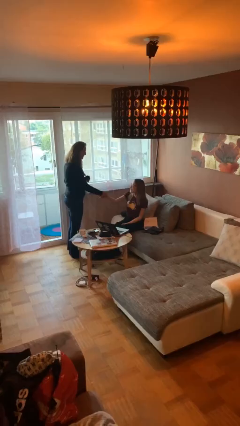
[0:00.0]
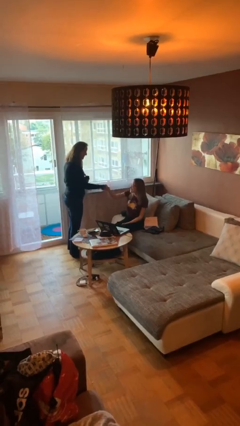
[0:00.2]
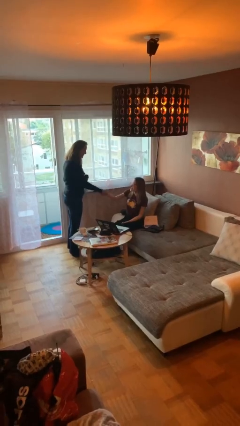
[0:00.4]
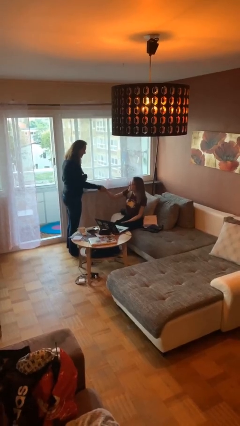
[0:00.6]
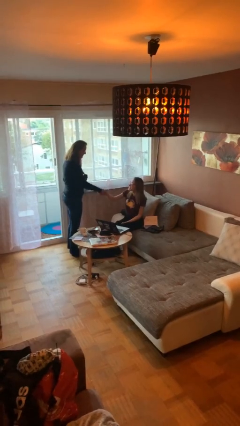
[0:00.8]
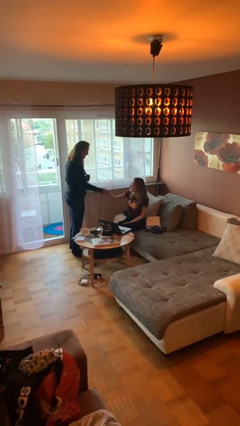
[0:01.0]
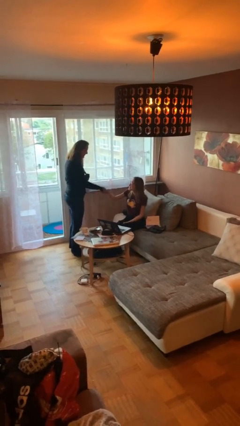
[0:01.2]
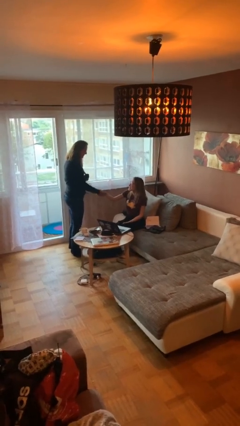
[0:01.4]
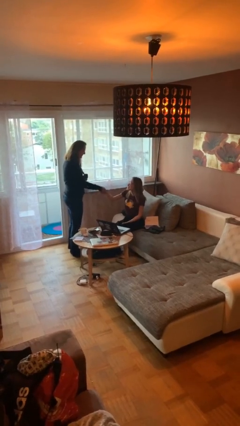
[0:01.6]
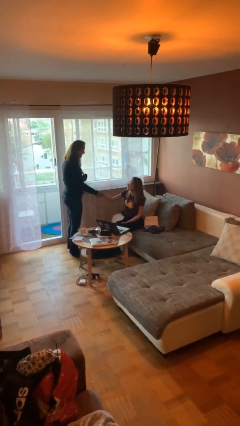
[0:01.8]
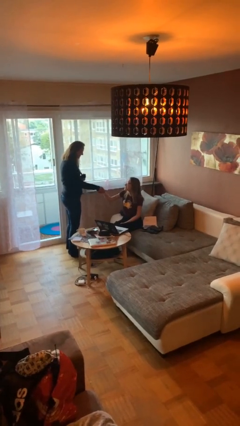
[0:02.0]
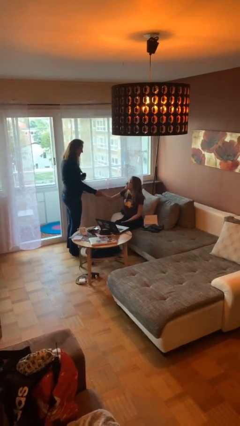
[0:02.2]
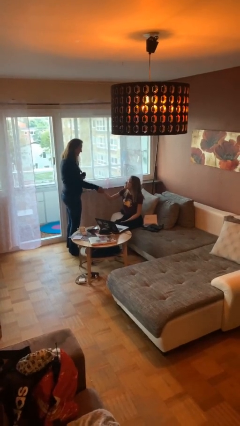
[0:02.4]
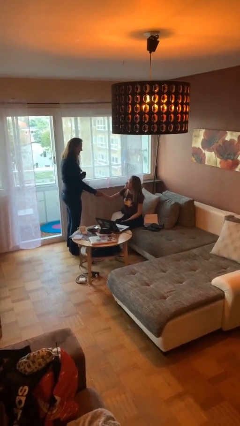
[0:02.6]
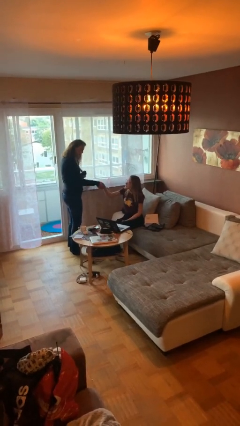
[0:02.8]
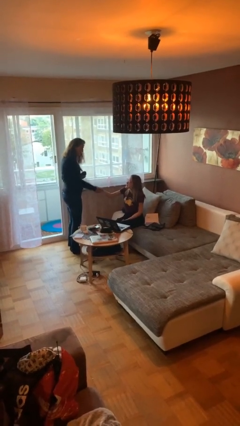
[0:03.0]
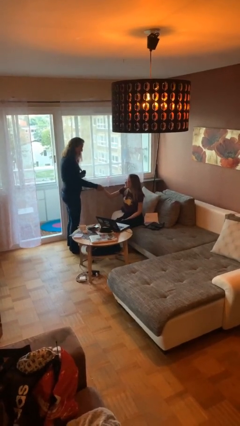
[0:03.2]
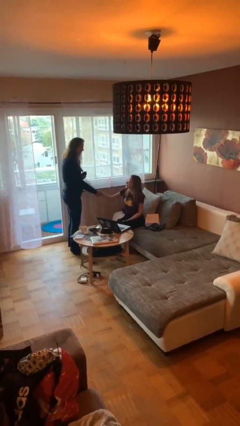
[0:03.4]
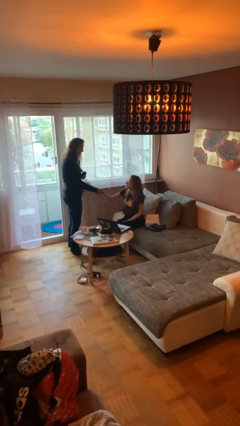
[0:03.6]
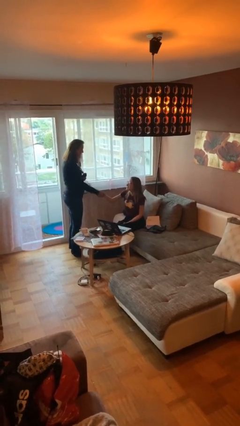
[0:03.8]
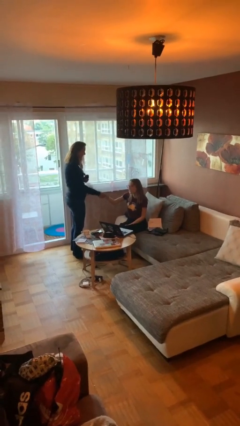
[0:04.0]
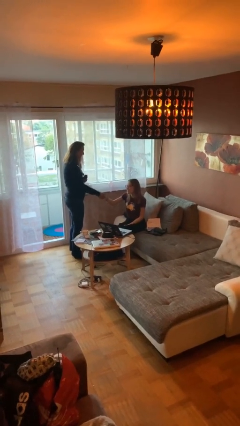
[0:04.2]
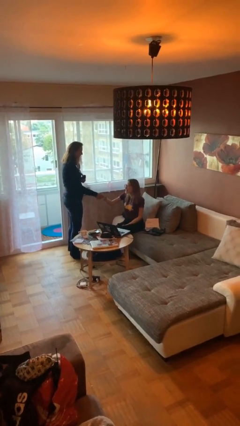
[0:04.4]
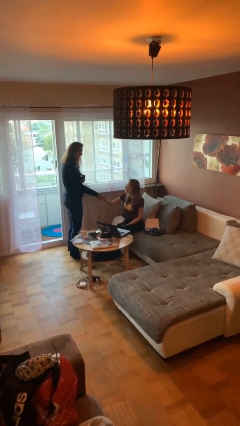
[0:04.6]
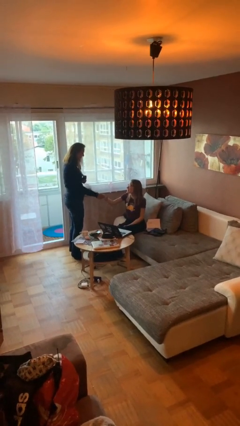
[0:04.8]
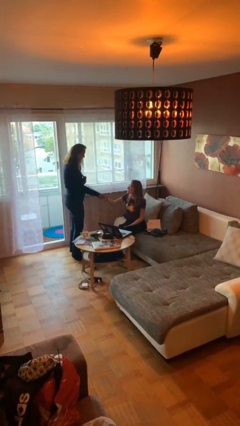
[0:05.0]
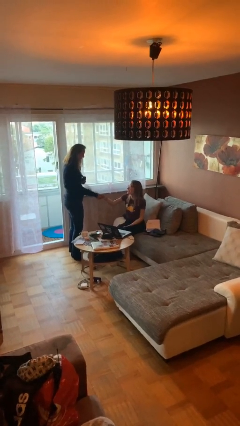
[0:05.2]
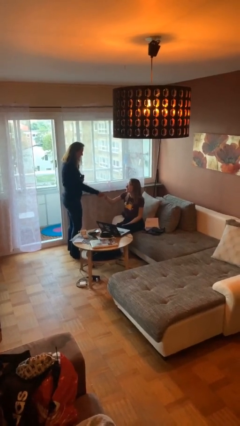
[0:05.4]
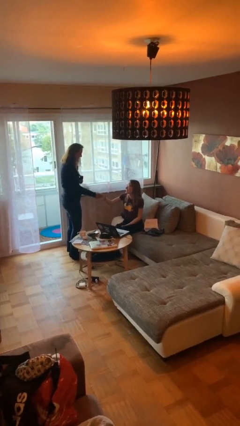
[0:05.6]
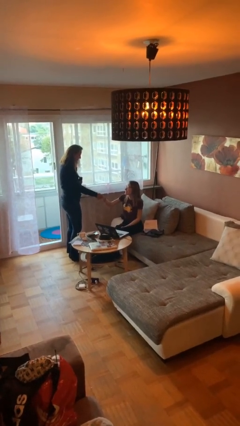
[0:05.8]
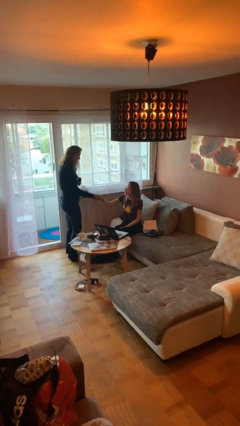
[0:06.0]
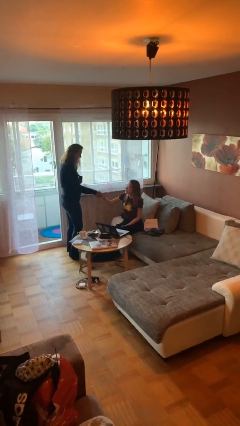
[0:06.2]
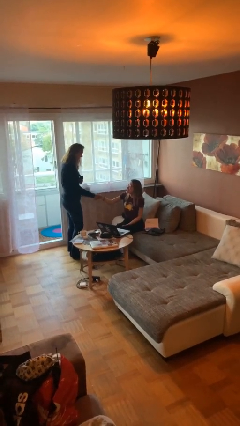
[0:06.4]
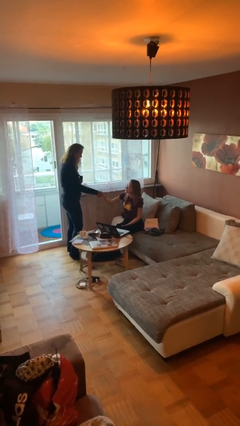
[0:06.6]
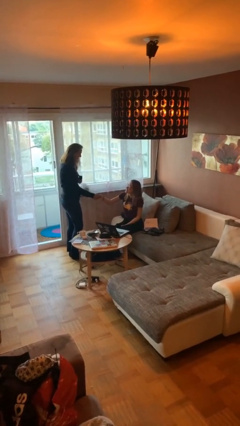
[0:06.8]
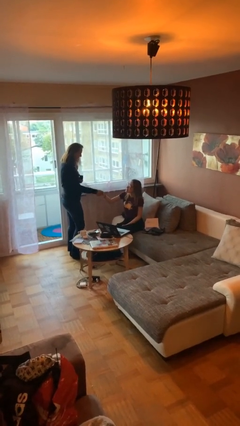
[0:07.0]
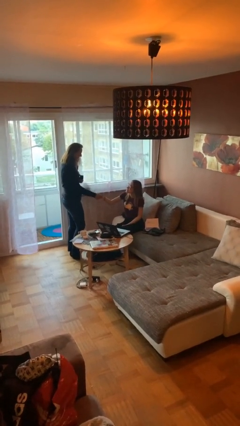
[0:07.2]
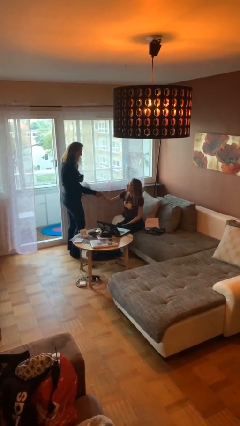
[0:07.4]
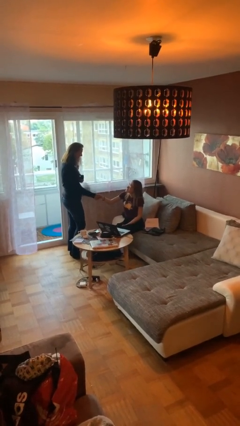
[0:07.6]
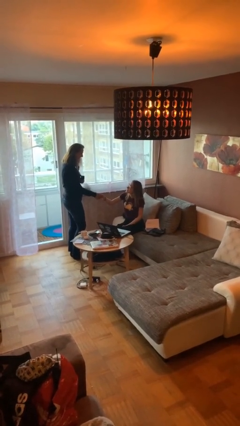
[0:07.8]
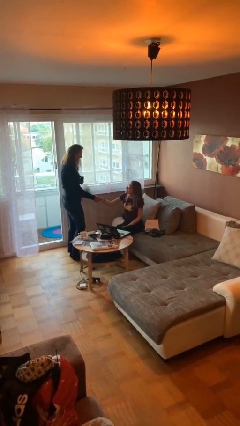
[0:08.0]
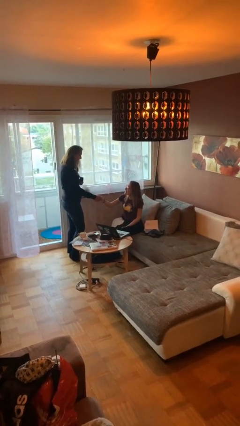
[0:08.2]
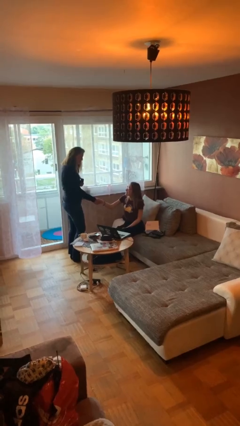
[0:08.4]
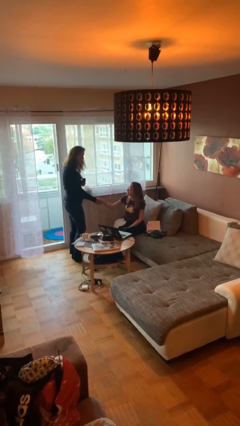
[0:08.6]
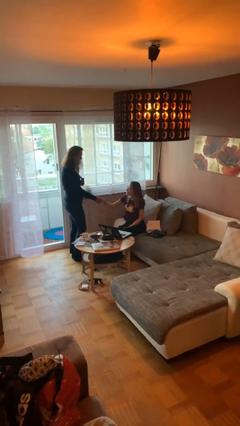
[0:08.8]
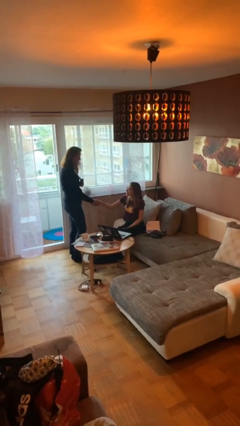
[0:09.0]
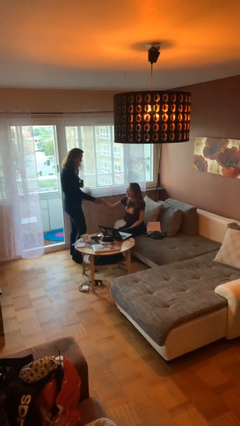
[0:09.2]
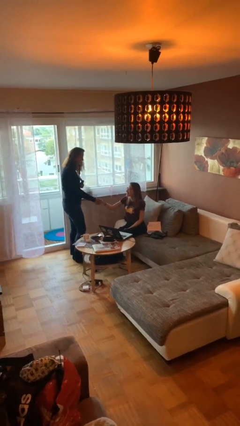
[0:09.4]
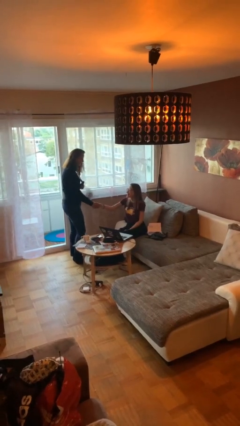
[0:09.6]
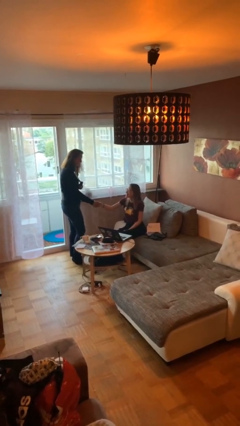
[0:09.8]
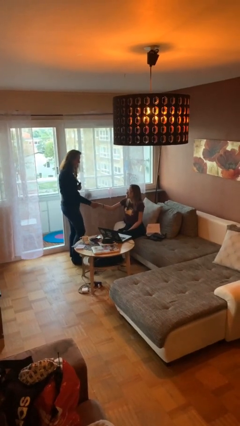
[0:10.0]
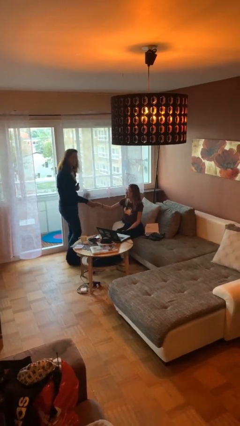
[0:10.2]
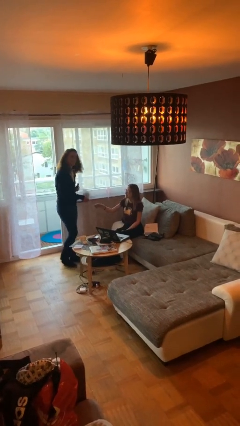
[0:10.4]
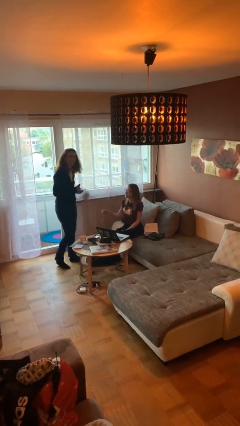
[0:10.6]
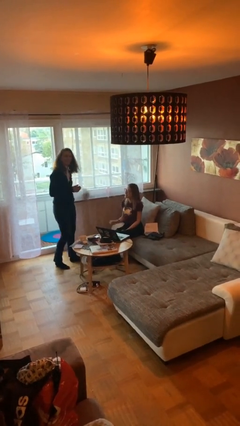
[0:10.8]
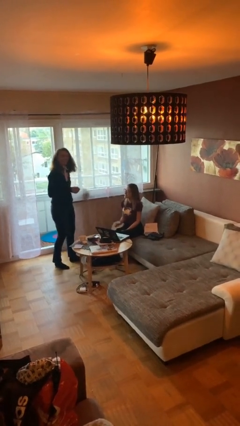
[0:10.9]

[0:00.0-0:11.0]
person shakes hand

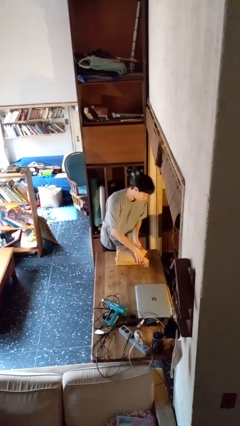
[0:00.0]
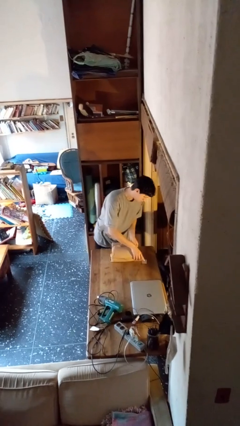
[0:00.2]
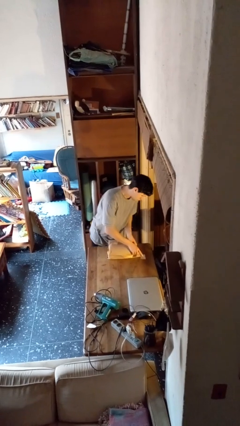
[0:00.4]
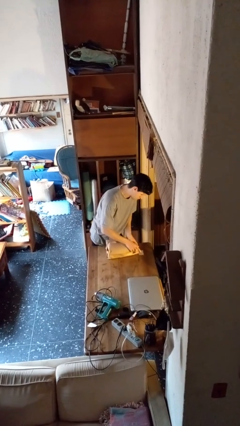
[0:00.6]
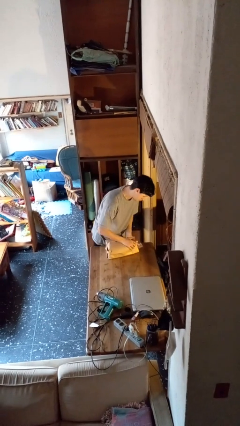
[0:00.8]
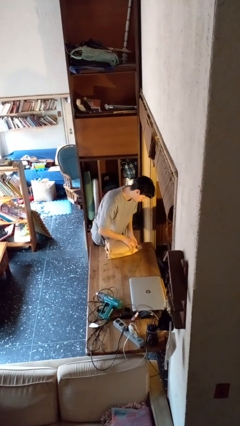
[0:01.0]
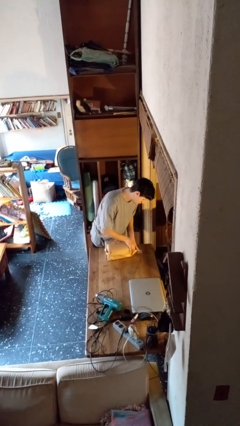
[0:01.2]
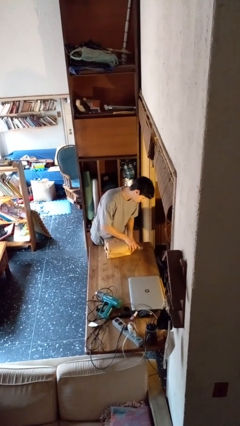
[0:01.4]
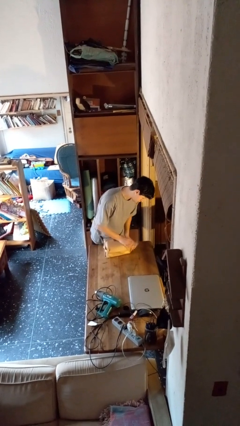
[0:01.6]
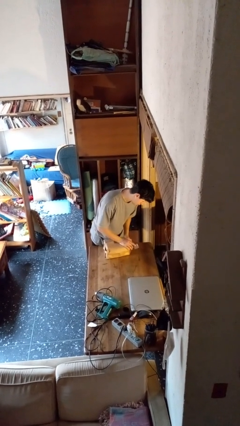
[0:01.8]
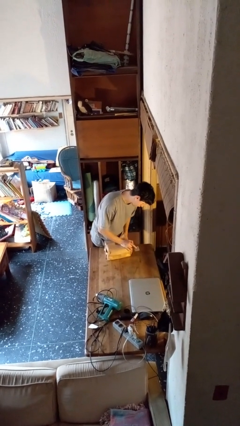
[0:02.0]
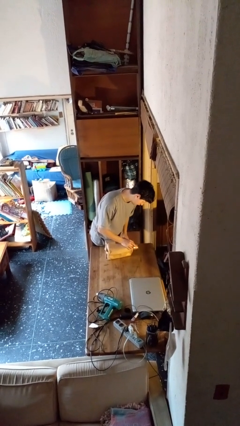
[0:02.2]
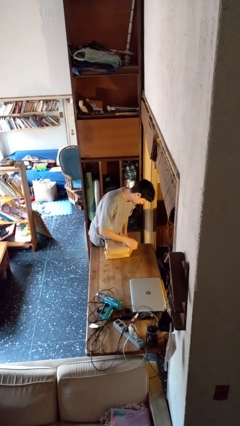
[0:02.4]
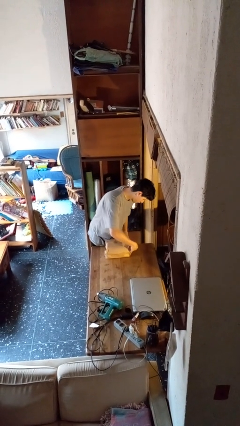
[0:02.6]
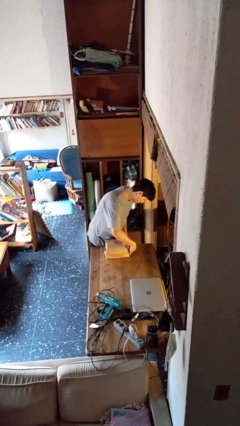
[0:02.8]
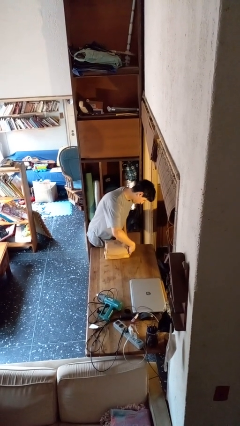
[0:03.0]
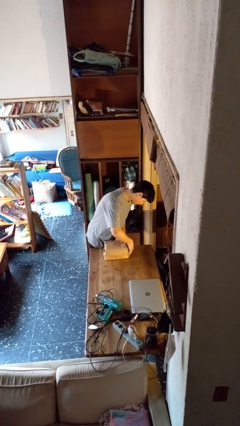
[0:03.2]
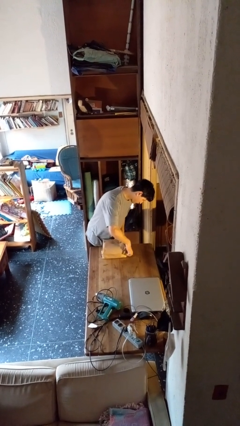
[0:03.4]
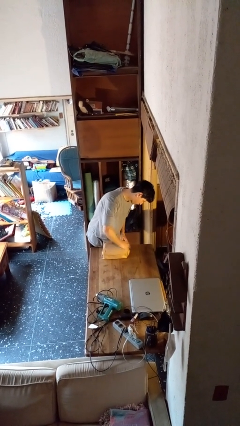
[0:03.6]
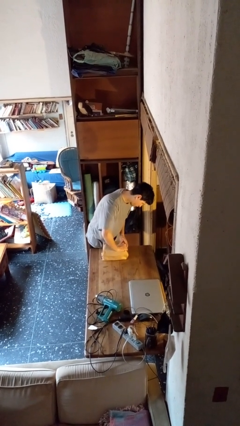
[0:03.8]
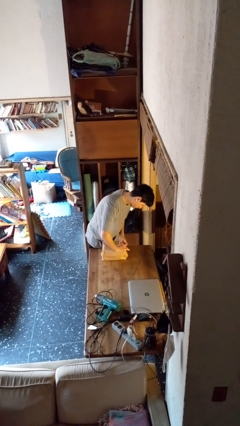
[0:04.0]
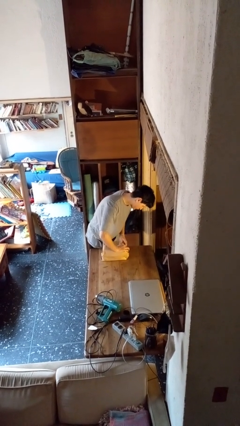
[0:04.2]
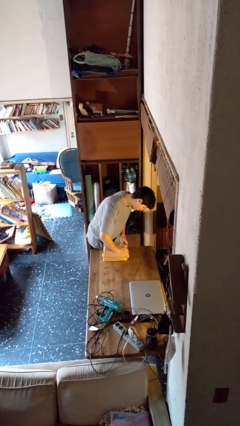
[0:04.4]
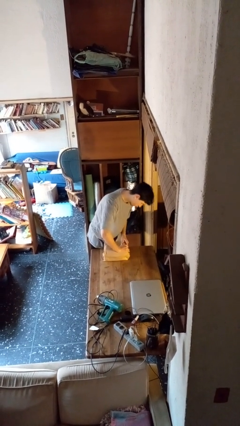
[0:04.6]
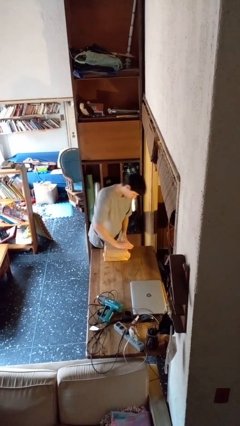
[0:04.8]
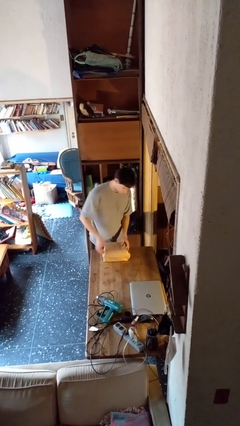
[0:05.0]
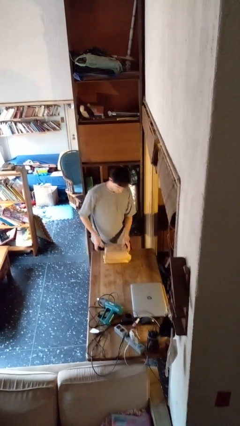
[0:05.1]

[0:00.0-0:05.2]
person wraps box

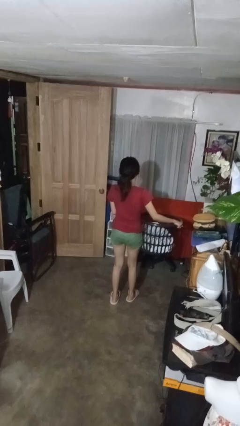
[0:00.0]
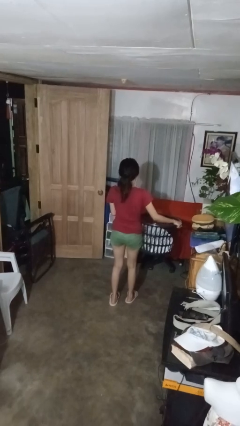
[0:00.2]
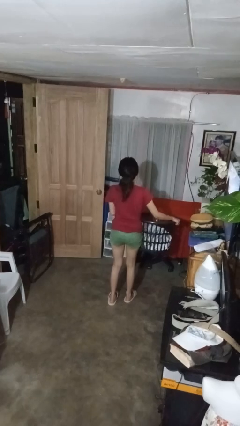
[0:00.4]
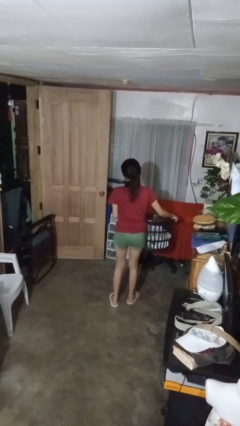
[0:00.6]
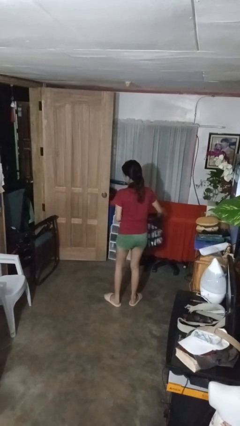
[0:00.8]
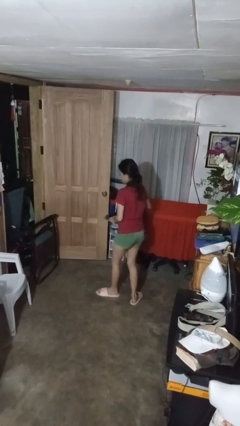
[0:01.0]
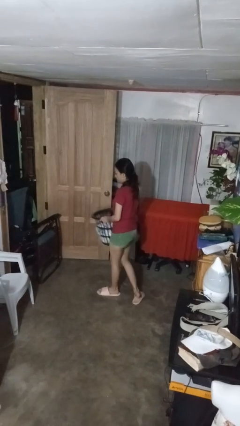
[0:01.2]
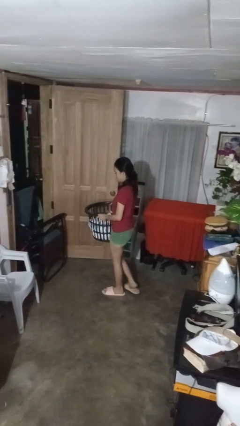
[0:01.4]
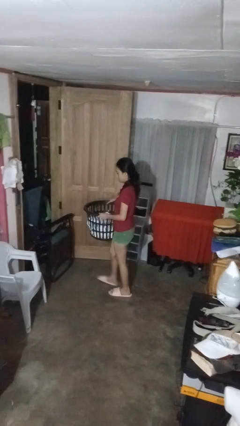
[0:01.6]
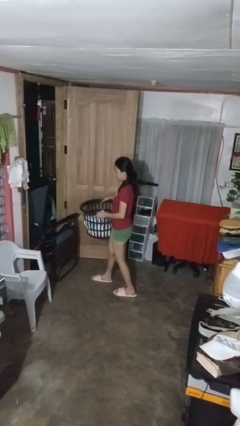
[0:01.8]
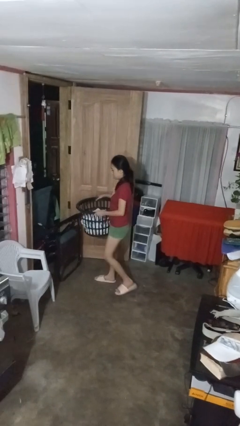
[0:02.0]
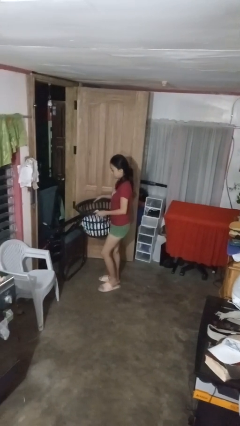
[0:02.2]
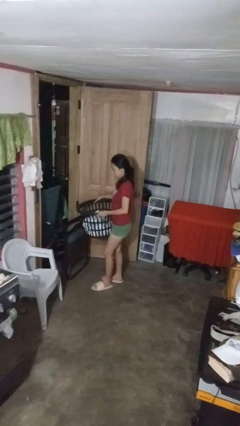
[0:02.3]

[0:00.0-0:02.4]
person carries laundry basket
